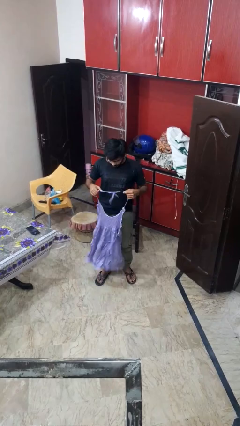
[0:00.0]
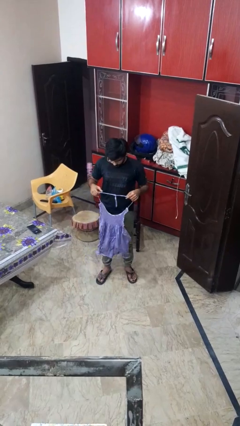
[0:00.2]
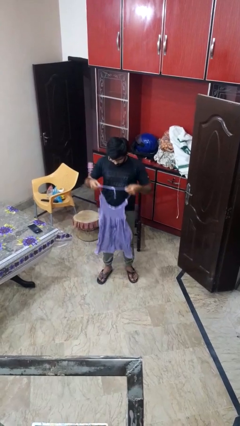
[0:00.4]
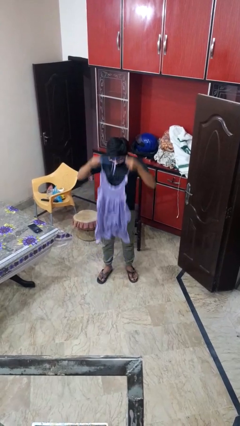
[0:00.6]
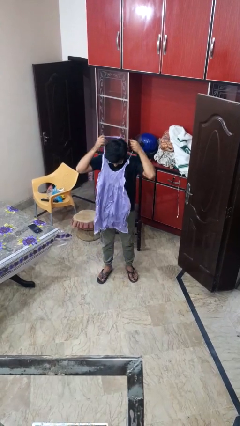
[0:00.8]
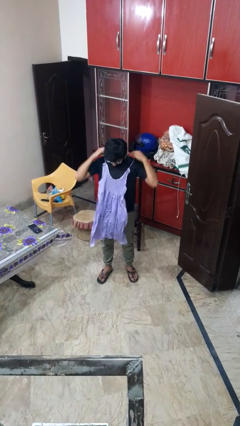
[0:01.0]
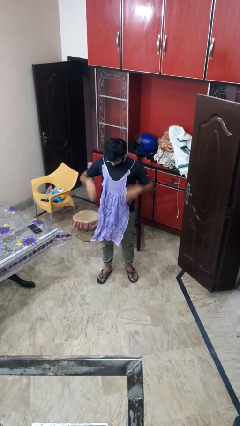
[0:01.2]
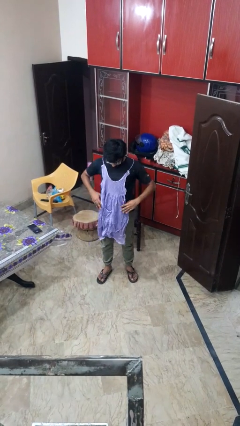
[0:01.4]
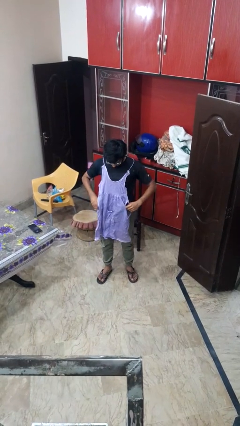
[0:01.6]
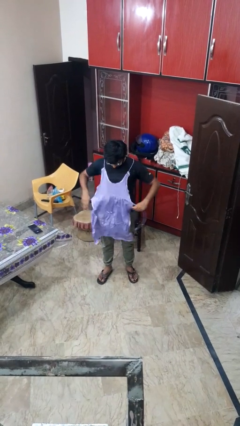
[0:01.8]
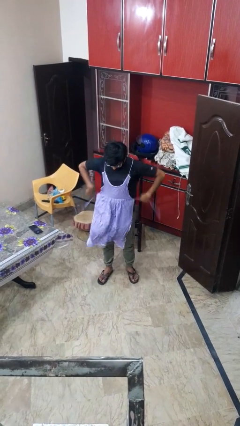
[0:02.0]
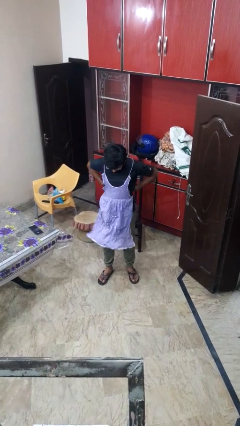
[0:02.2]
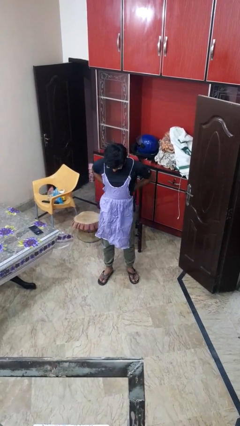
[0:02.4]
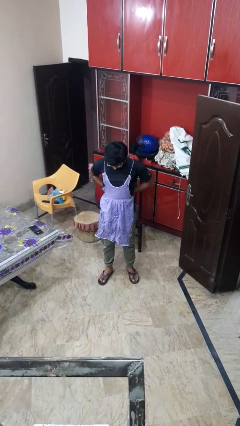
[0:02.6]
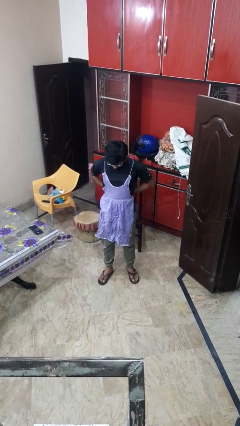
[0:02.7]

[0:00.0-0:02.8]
person puts on apron

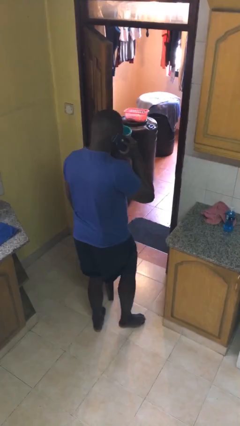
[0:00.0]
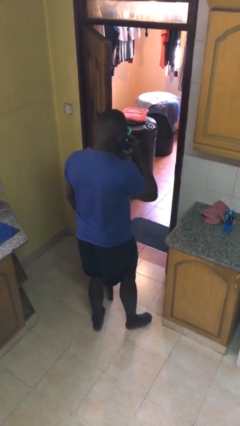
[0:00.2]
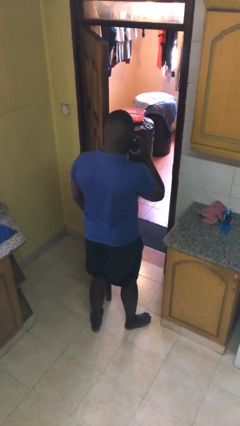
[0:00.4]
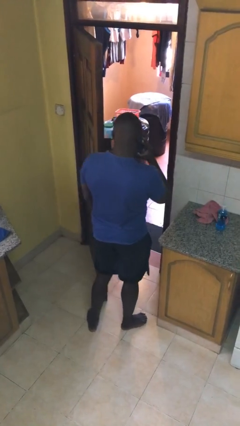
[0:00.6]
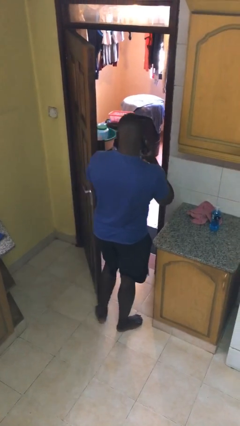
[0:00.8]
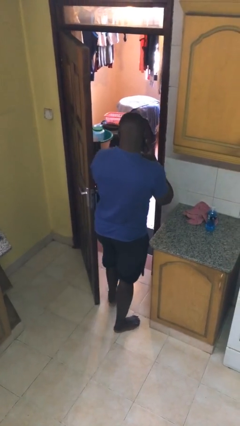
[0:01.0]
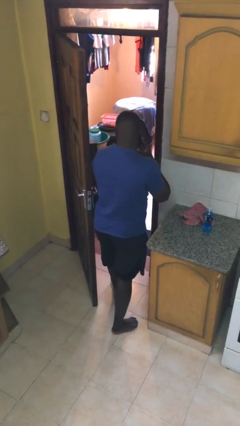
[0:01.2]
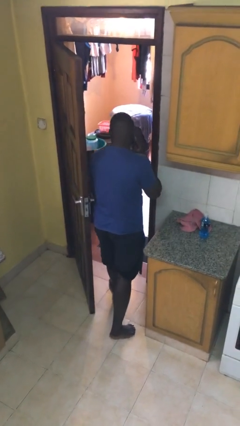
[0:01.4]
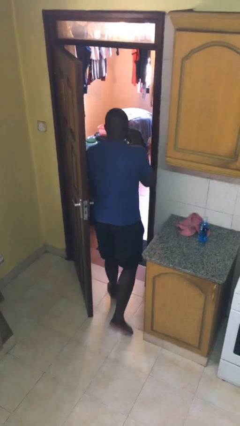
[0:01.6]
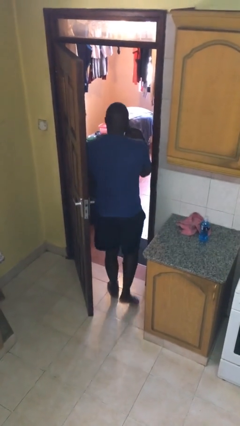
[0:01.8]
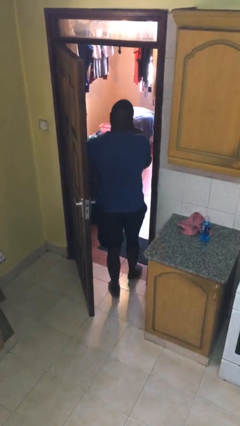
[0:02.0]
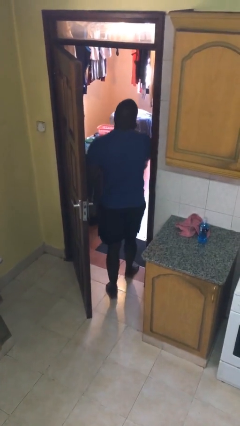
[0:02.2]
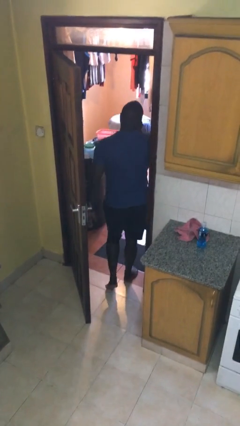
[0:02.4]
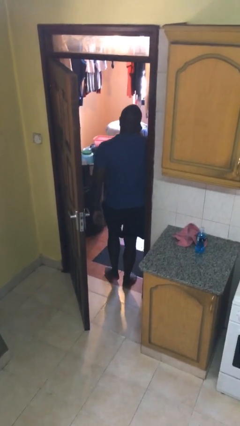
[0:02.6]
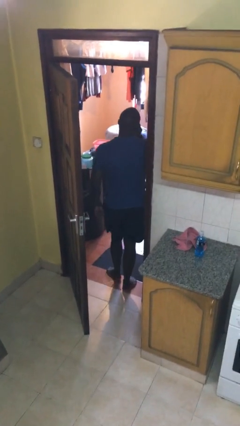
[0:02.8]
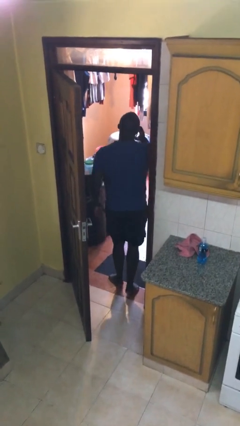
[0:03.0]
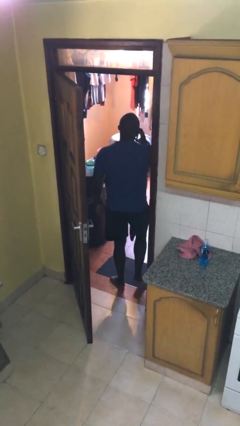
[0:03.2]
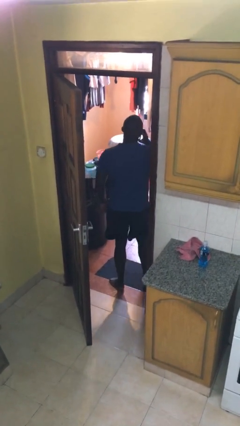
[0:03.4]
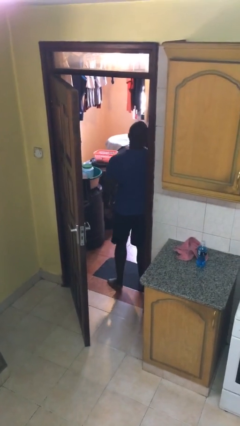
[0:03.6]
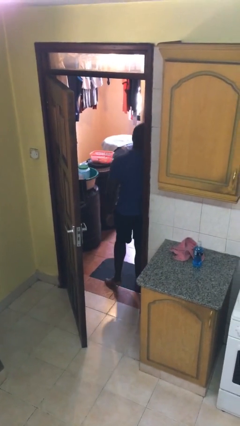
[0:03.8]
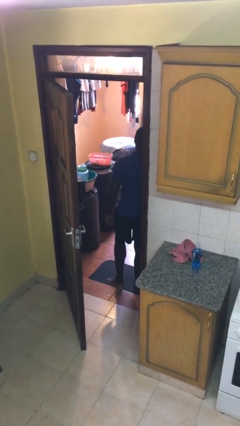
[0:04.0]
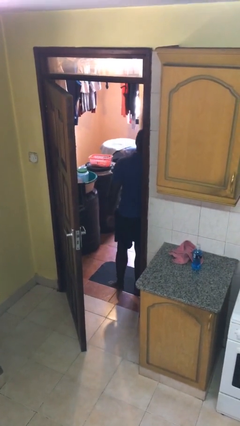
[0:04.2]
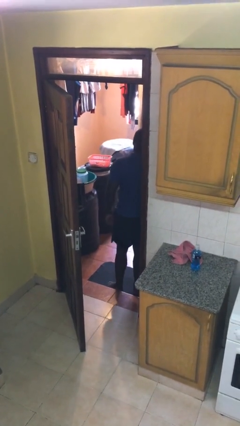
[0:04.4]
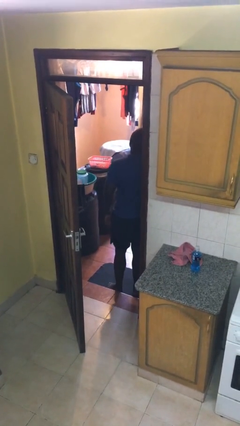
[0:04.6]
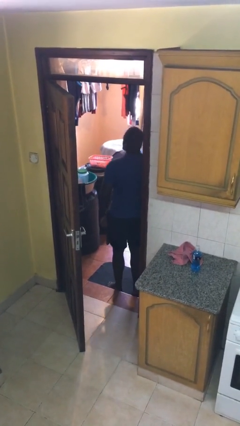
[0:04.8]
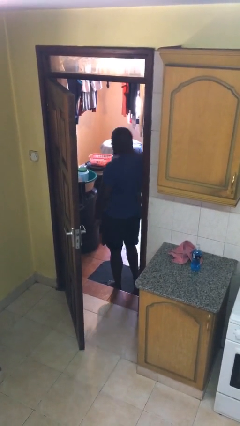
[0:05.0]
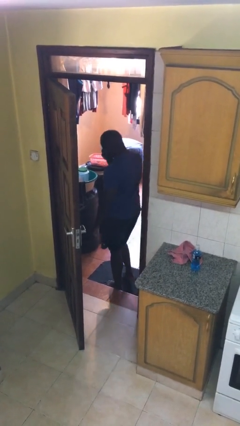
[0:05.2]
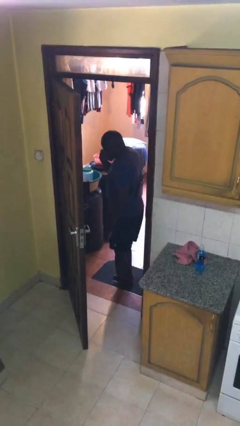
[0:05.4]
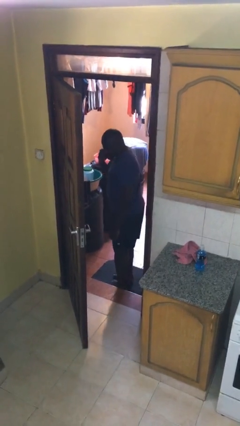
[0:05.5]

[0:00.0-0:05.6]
person exits scene through structure

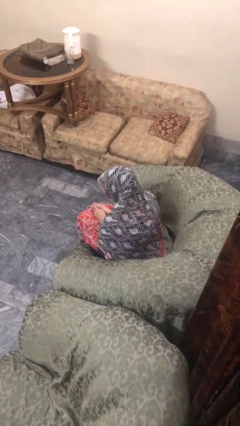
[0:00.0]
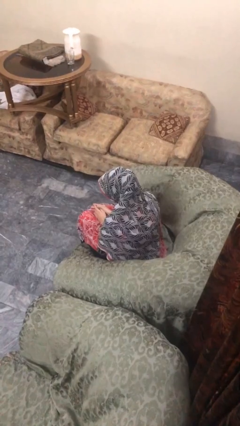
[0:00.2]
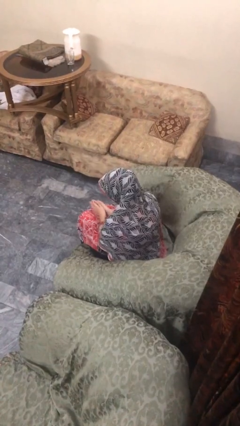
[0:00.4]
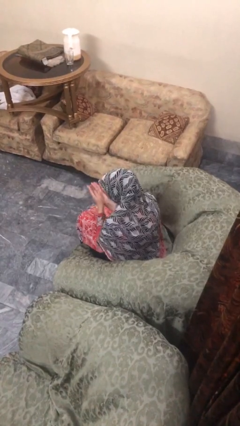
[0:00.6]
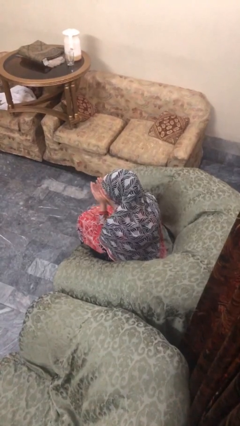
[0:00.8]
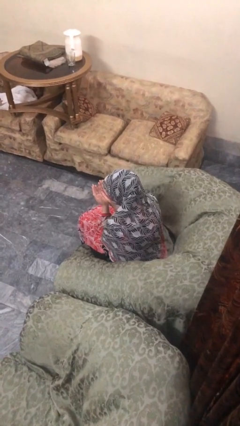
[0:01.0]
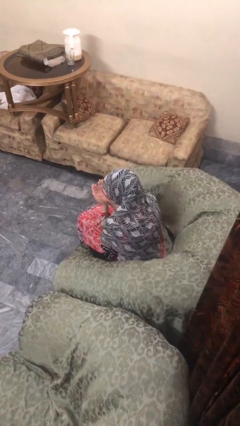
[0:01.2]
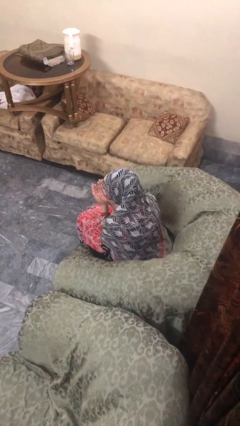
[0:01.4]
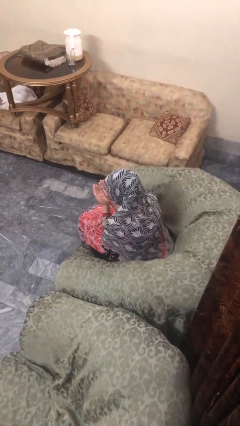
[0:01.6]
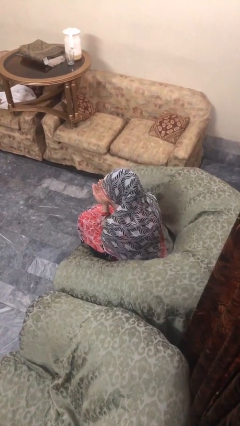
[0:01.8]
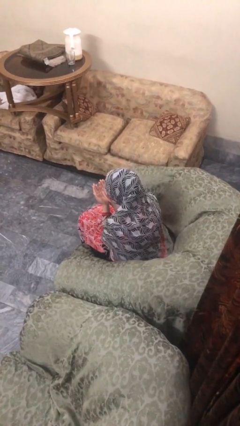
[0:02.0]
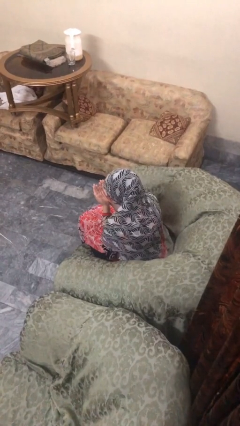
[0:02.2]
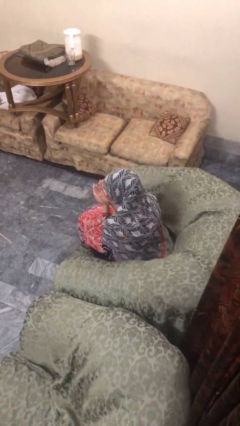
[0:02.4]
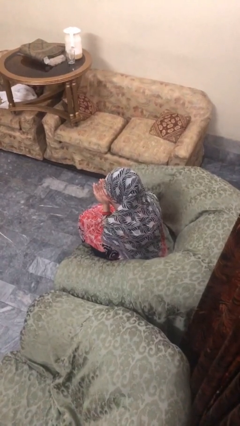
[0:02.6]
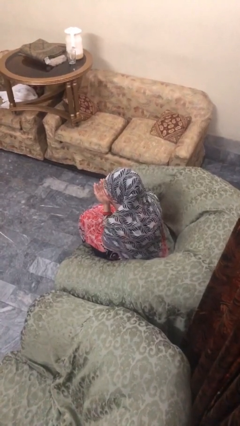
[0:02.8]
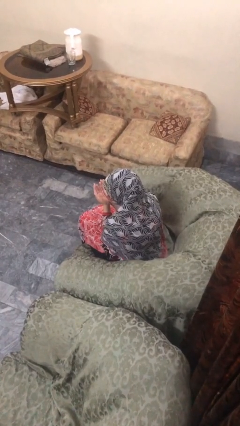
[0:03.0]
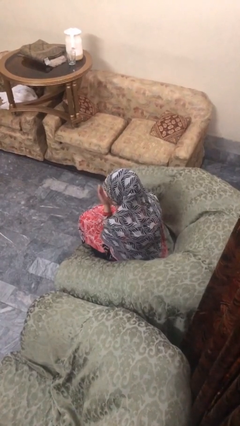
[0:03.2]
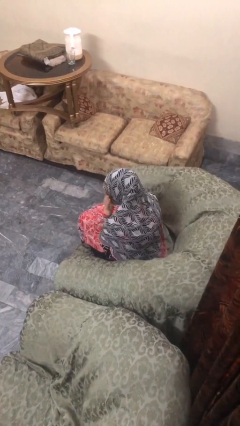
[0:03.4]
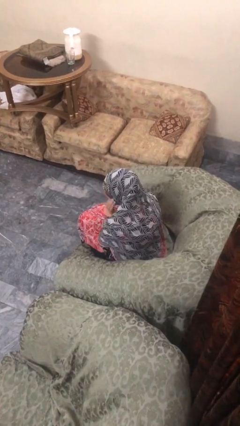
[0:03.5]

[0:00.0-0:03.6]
person prays

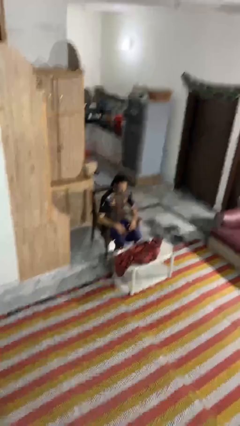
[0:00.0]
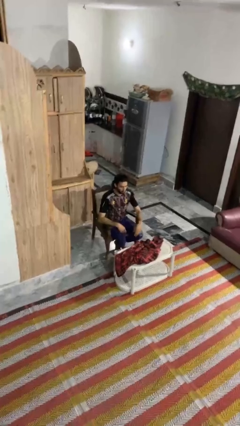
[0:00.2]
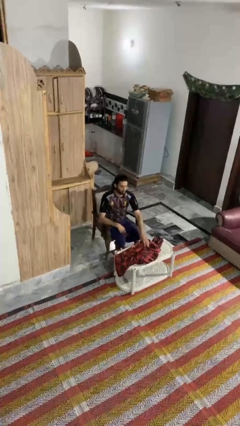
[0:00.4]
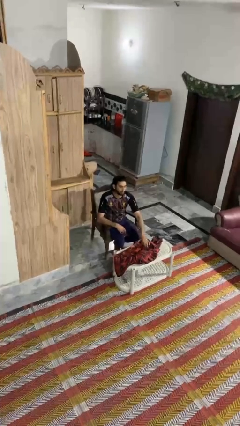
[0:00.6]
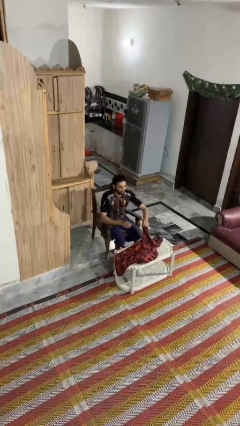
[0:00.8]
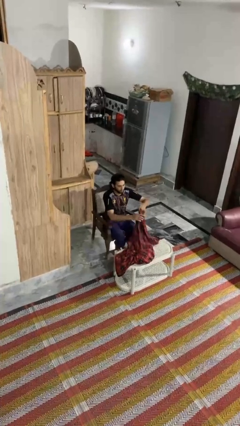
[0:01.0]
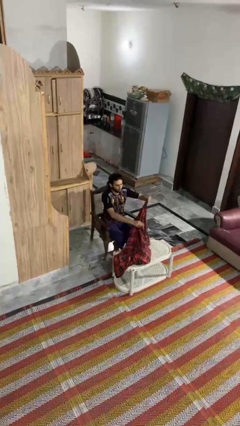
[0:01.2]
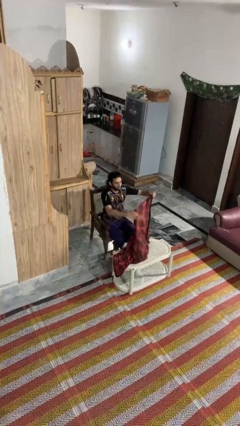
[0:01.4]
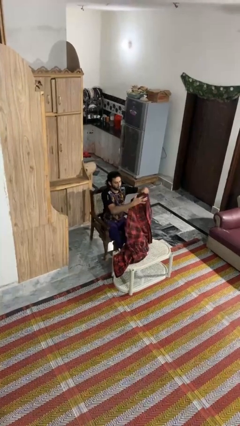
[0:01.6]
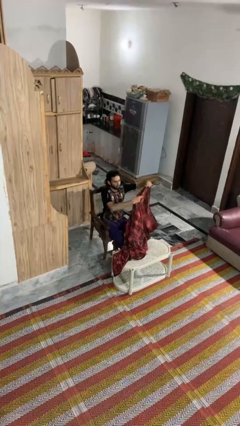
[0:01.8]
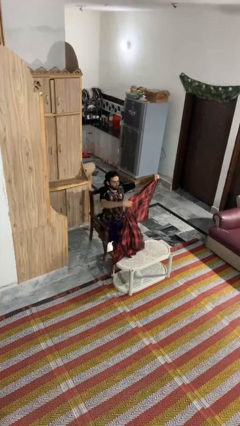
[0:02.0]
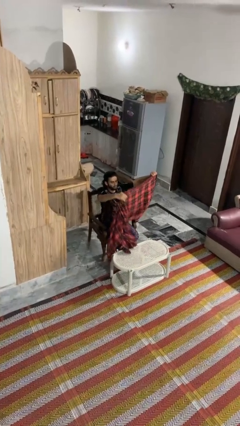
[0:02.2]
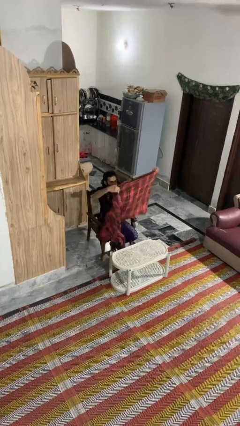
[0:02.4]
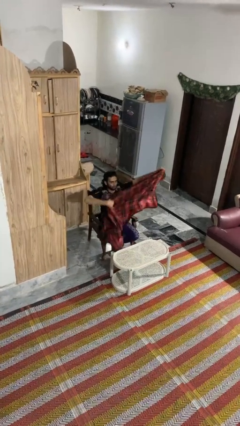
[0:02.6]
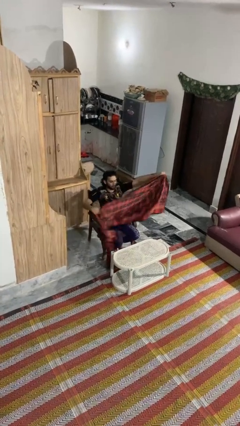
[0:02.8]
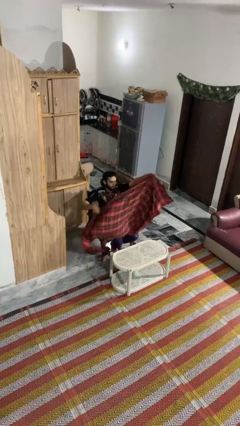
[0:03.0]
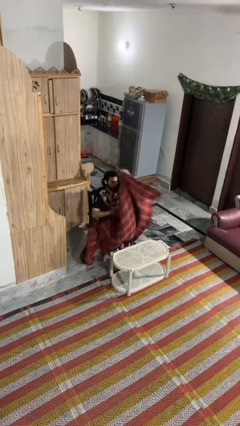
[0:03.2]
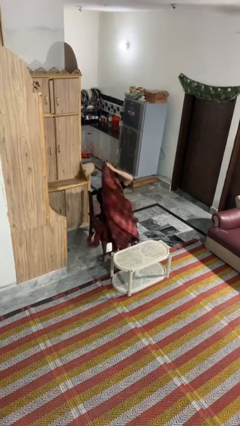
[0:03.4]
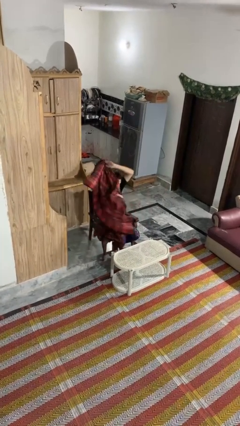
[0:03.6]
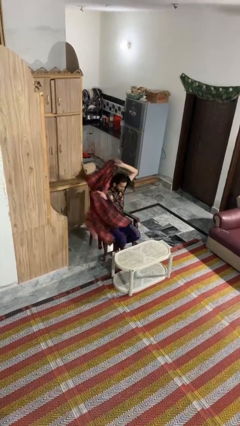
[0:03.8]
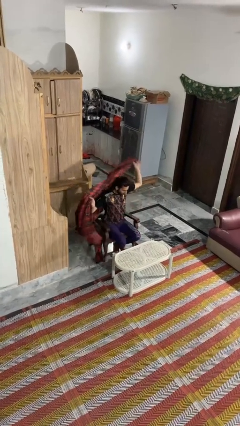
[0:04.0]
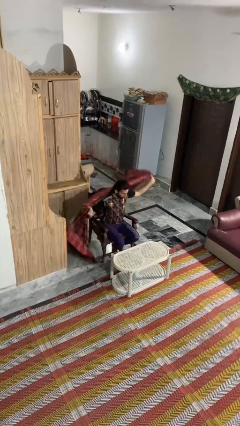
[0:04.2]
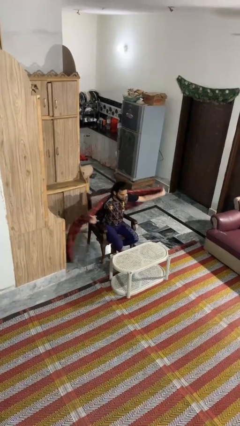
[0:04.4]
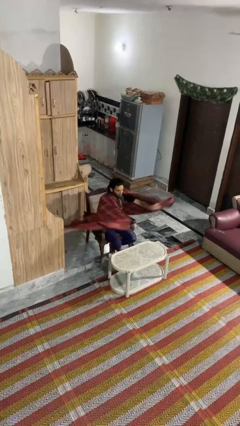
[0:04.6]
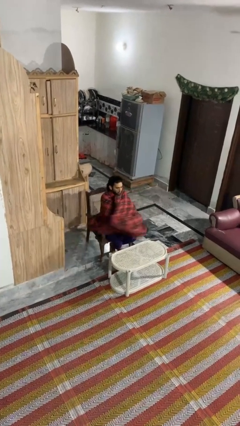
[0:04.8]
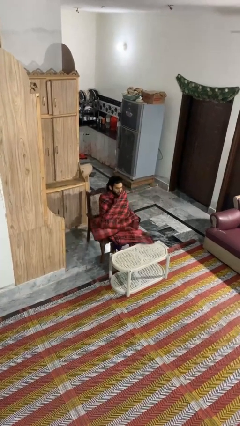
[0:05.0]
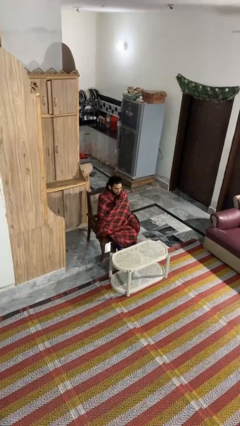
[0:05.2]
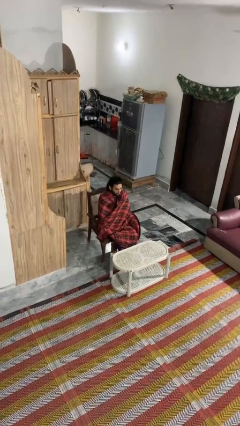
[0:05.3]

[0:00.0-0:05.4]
person covers with blanket

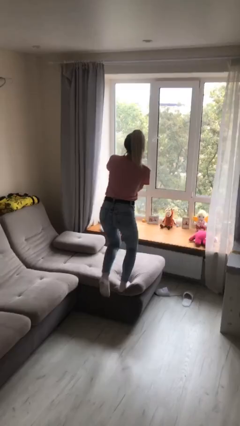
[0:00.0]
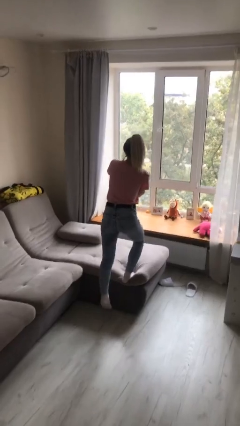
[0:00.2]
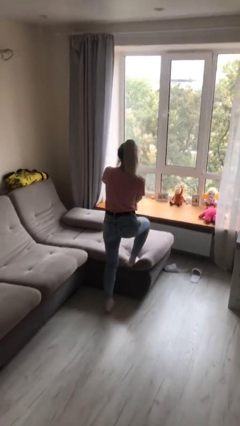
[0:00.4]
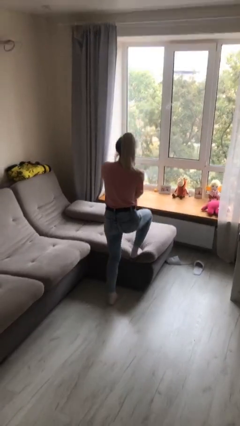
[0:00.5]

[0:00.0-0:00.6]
person climbs off couch
